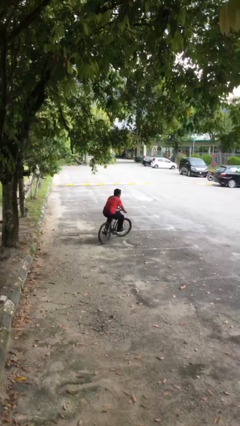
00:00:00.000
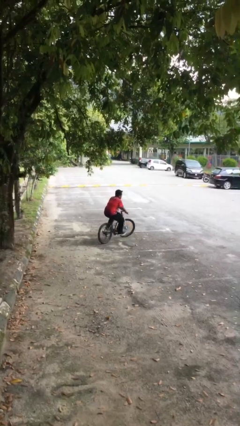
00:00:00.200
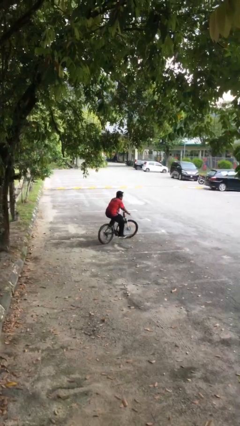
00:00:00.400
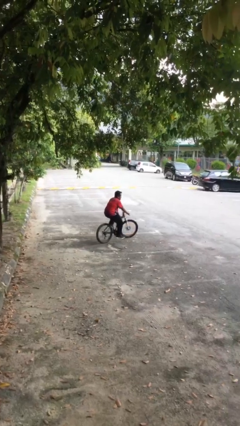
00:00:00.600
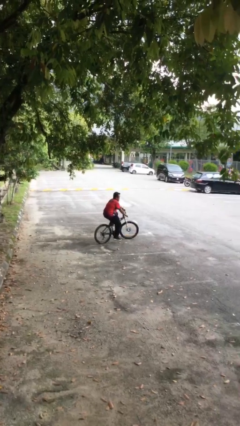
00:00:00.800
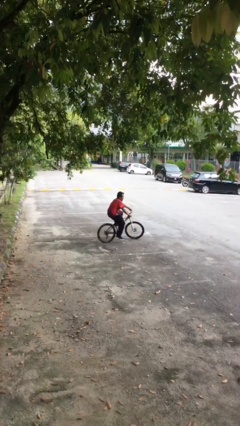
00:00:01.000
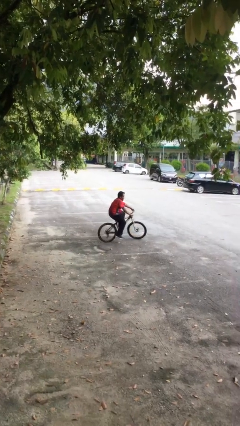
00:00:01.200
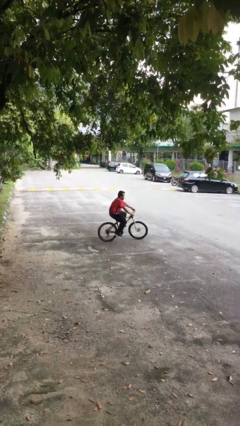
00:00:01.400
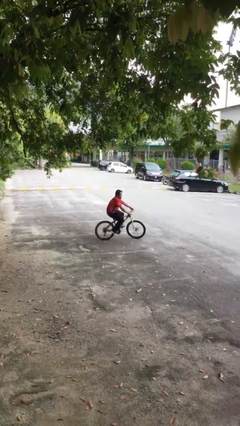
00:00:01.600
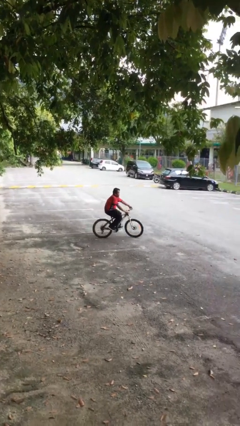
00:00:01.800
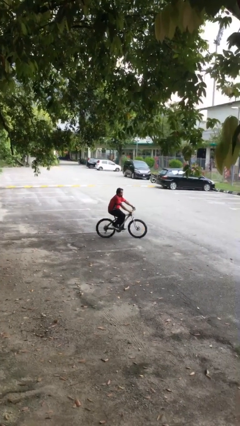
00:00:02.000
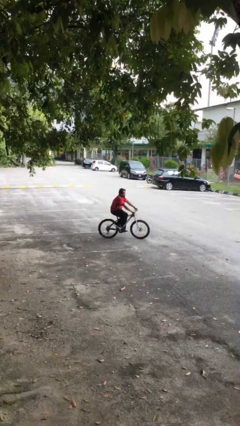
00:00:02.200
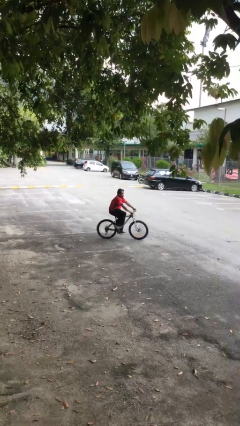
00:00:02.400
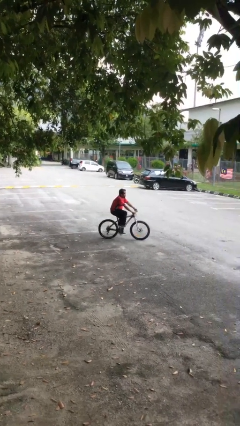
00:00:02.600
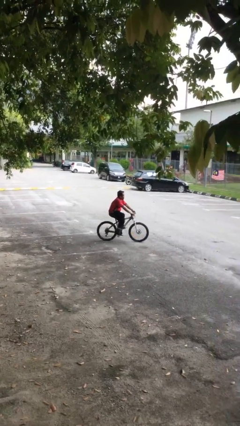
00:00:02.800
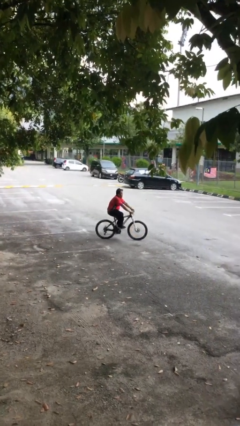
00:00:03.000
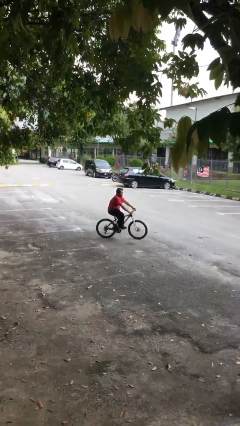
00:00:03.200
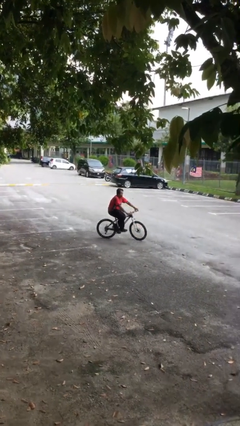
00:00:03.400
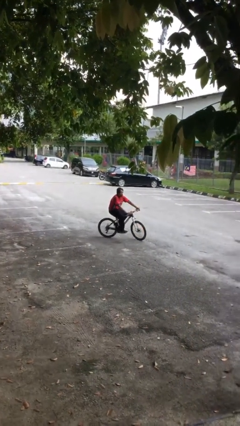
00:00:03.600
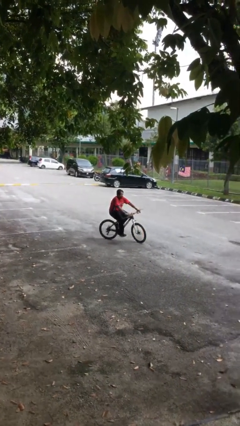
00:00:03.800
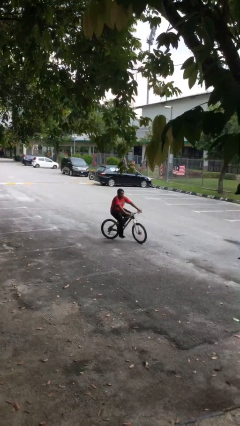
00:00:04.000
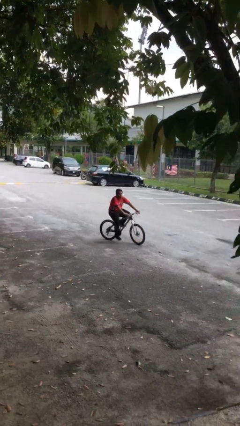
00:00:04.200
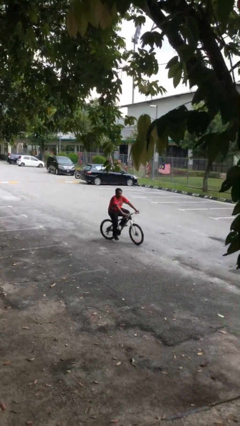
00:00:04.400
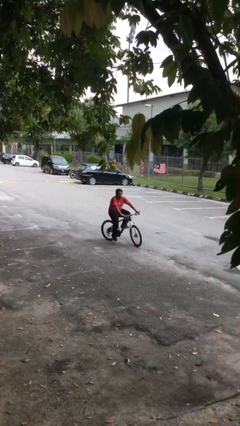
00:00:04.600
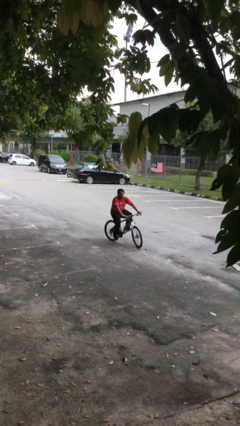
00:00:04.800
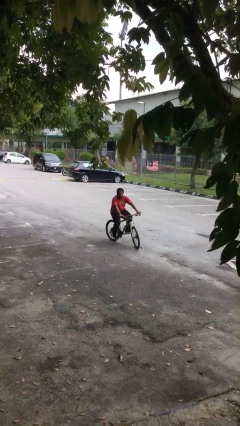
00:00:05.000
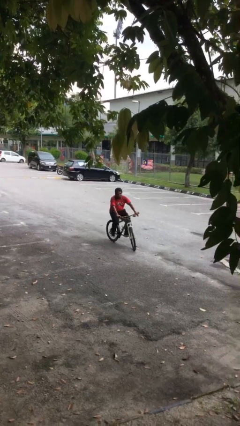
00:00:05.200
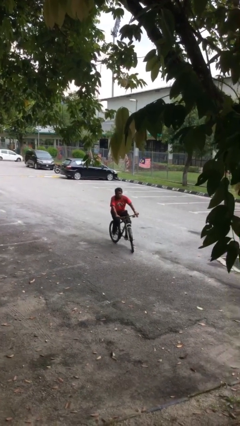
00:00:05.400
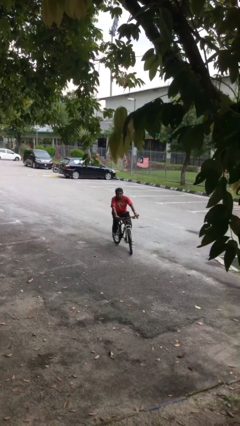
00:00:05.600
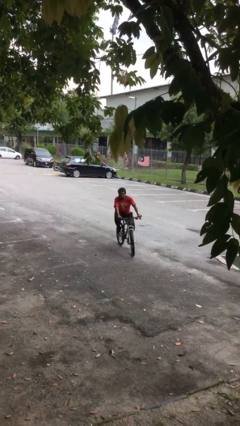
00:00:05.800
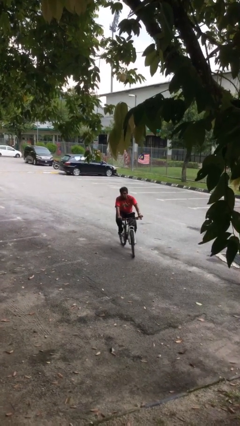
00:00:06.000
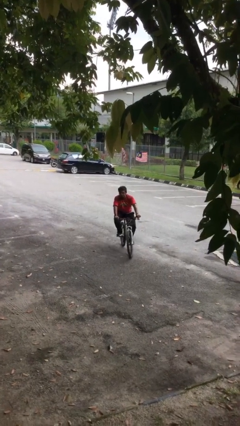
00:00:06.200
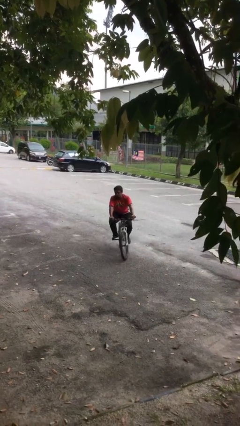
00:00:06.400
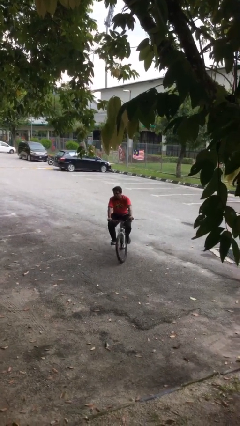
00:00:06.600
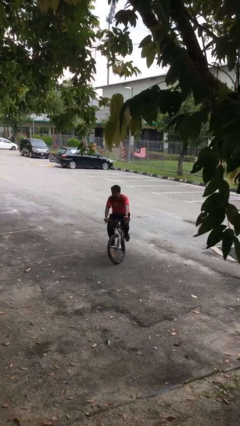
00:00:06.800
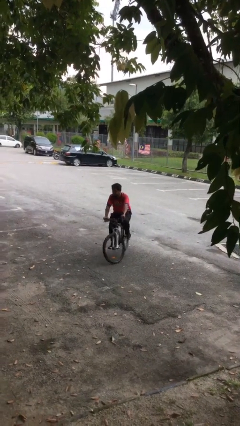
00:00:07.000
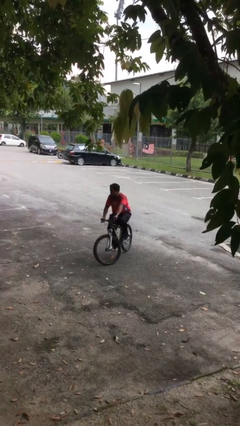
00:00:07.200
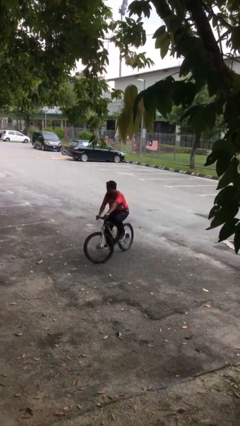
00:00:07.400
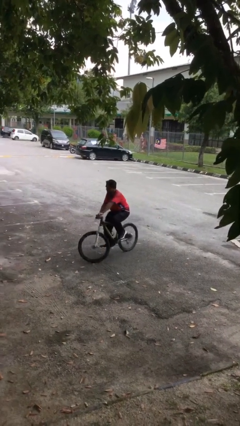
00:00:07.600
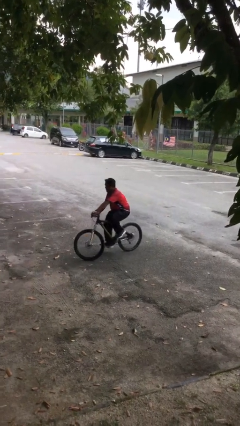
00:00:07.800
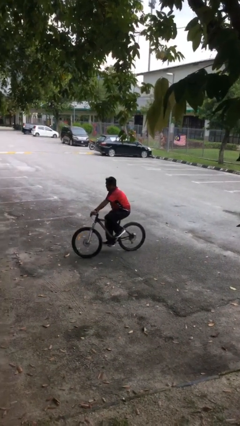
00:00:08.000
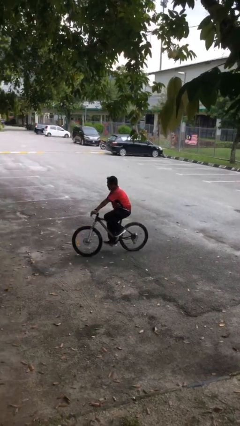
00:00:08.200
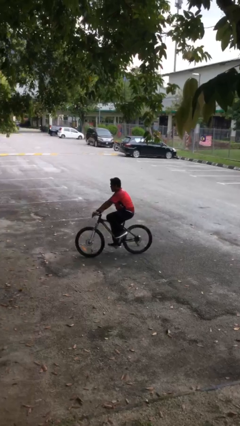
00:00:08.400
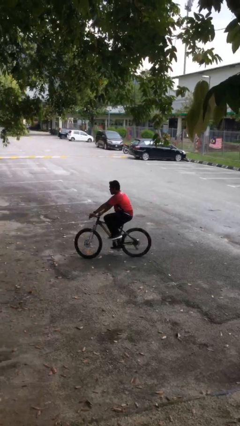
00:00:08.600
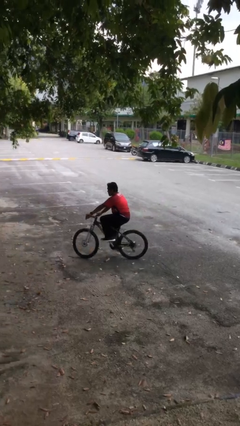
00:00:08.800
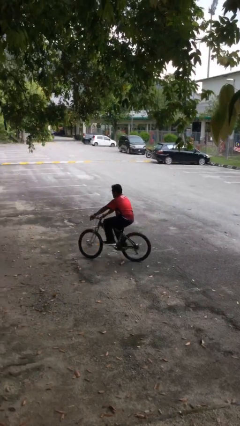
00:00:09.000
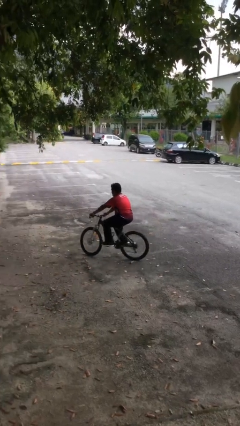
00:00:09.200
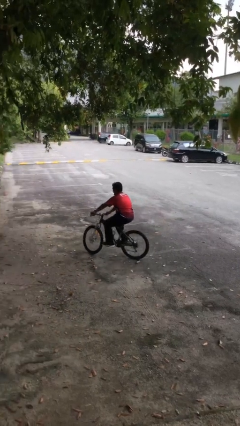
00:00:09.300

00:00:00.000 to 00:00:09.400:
person rides bicycle

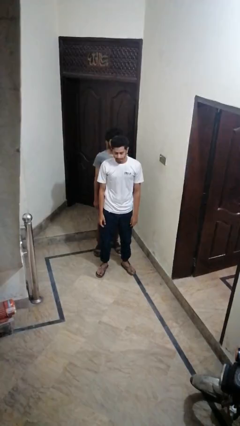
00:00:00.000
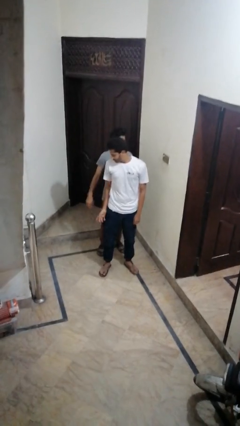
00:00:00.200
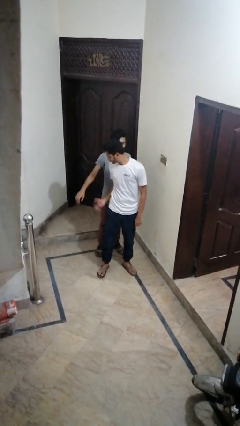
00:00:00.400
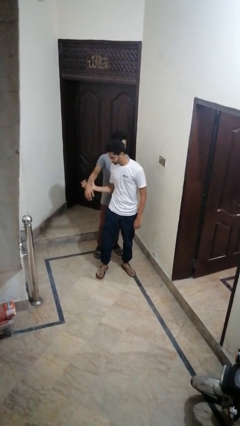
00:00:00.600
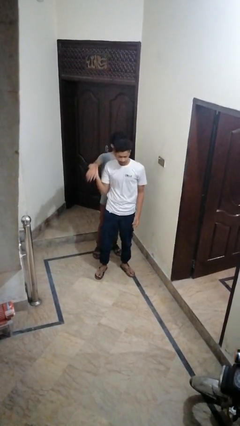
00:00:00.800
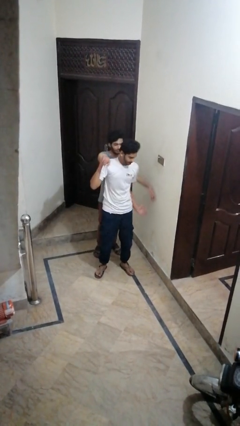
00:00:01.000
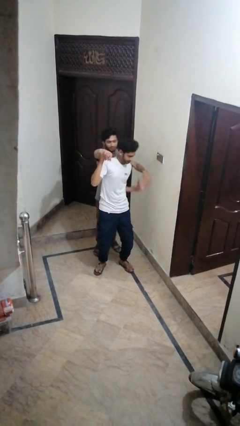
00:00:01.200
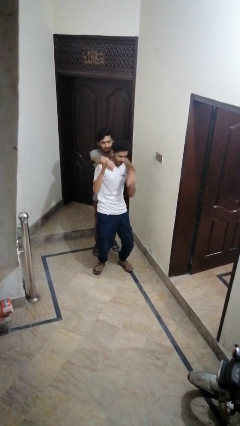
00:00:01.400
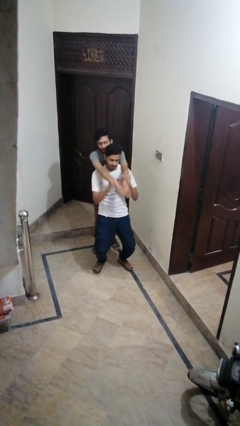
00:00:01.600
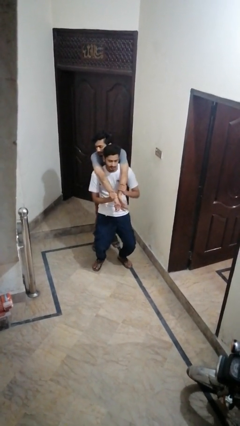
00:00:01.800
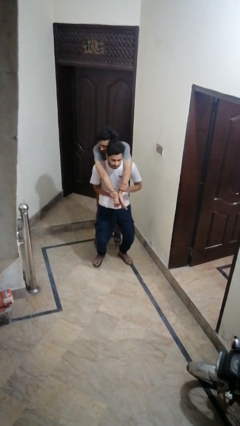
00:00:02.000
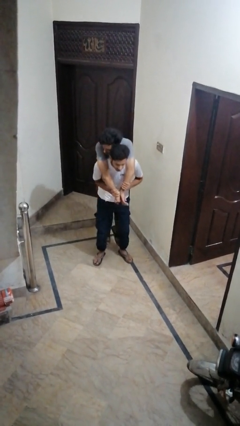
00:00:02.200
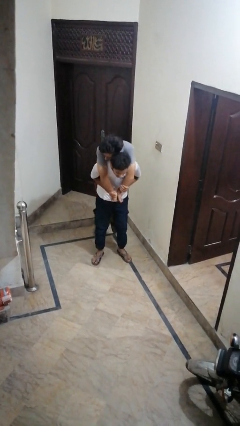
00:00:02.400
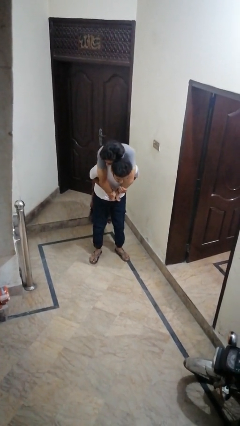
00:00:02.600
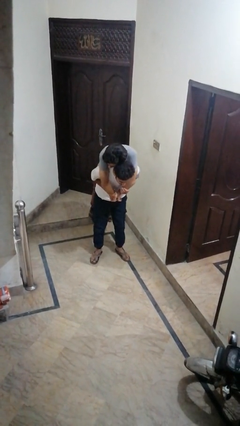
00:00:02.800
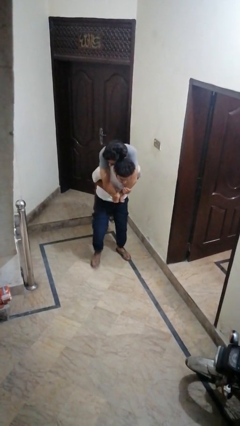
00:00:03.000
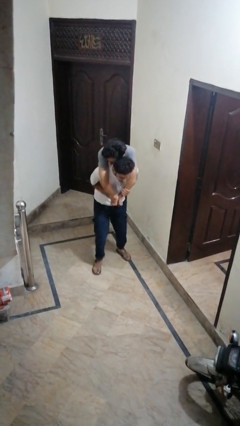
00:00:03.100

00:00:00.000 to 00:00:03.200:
person carries person over shoulder

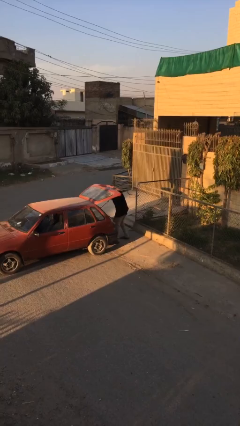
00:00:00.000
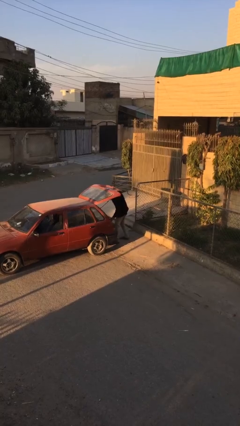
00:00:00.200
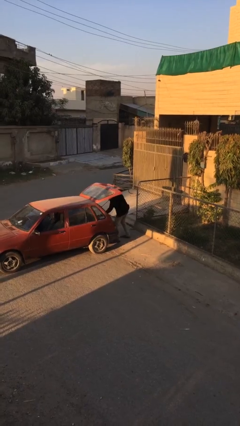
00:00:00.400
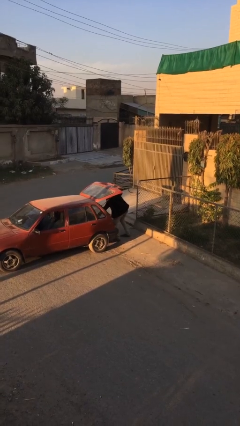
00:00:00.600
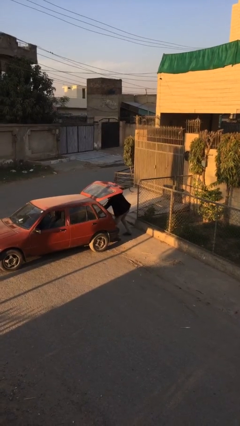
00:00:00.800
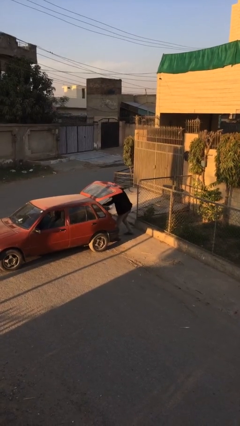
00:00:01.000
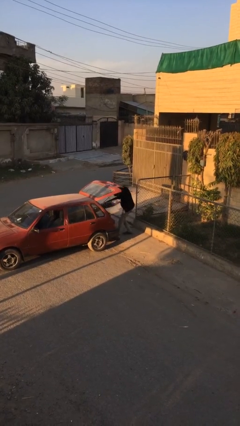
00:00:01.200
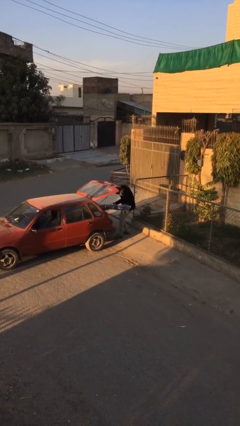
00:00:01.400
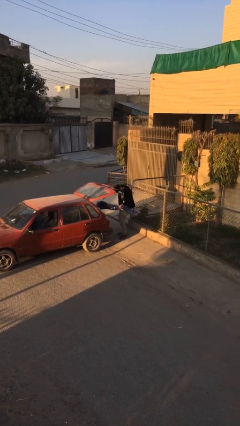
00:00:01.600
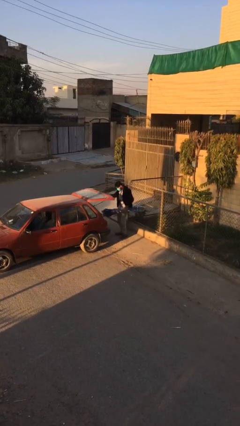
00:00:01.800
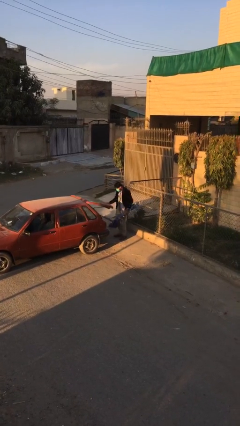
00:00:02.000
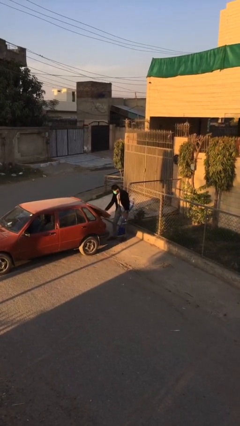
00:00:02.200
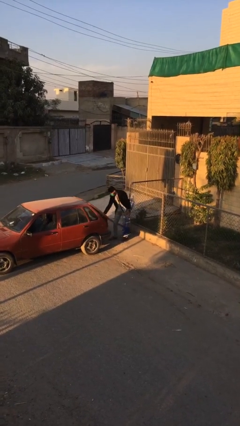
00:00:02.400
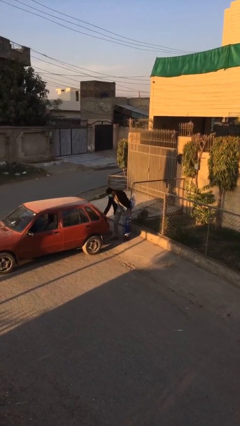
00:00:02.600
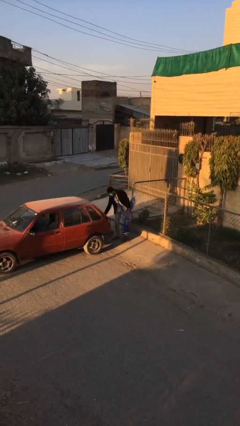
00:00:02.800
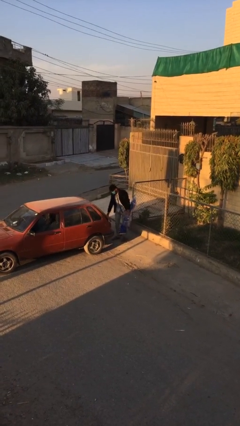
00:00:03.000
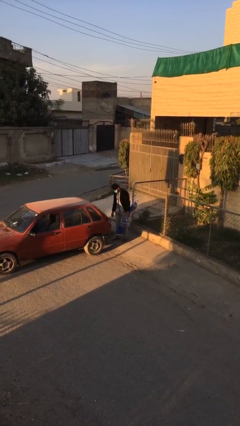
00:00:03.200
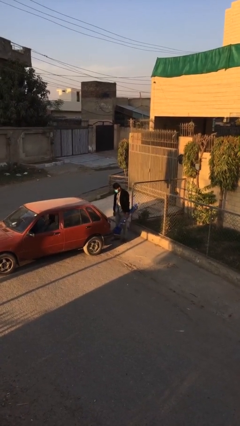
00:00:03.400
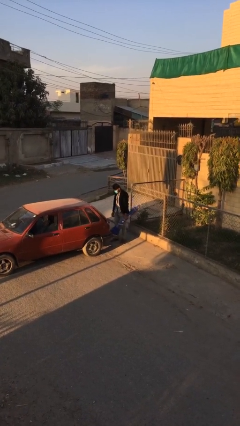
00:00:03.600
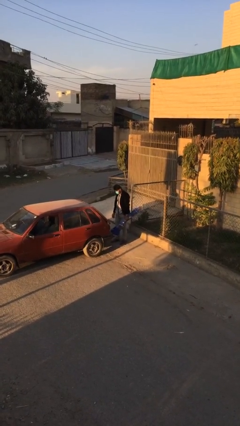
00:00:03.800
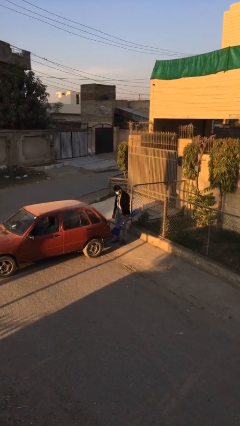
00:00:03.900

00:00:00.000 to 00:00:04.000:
person unloads car

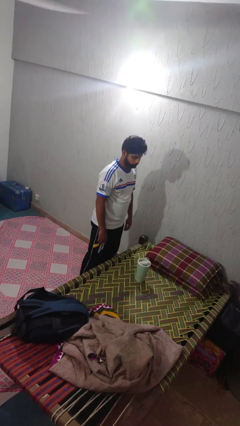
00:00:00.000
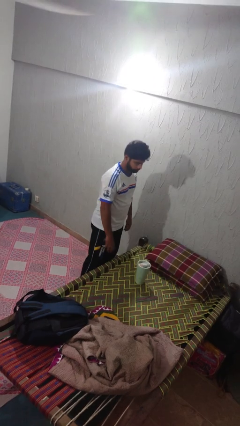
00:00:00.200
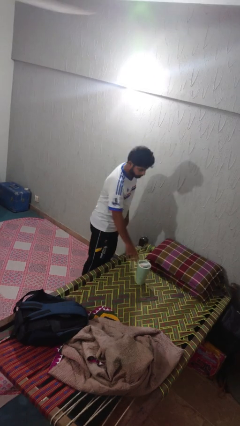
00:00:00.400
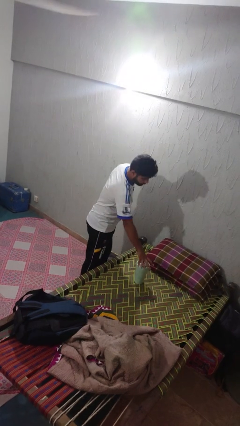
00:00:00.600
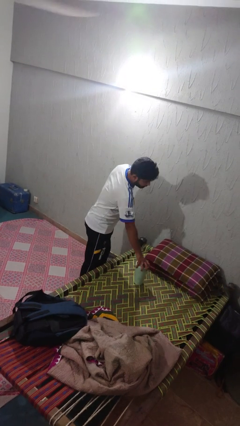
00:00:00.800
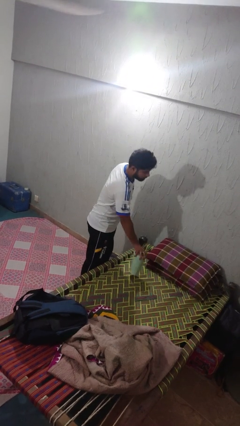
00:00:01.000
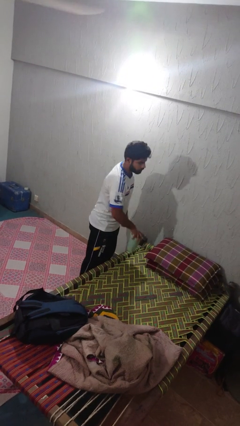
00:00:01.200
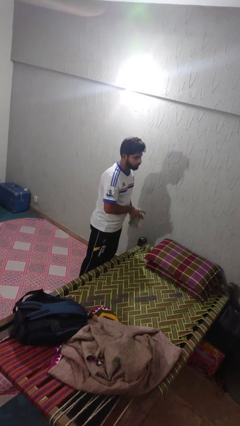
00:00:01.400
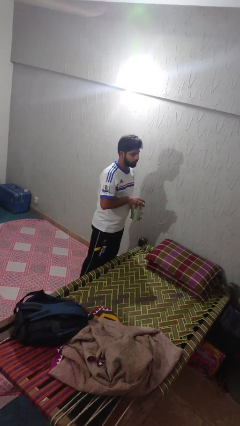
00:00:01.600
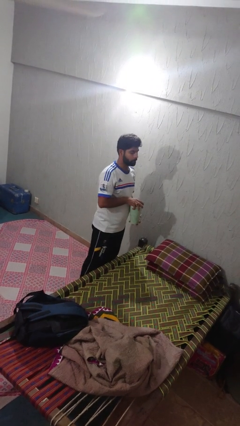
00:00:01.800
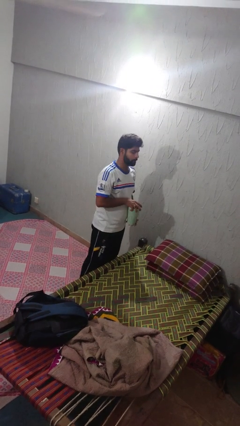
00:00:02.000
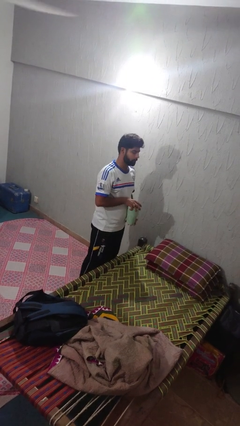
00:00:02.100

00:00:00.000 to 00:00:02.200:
person picks up object from bed
